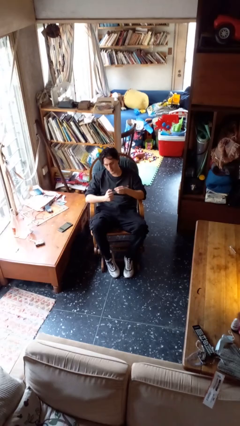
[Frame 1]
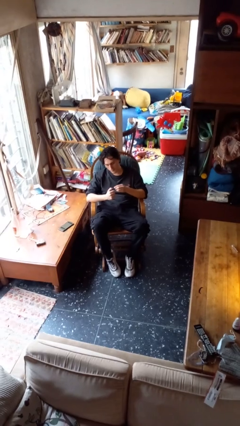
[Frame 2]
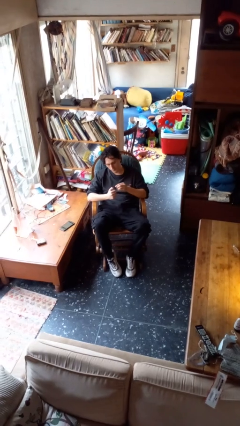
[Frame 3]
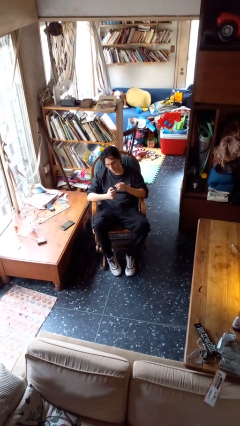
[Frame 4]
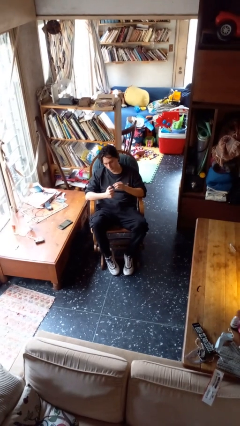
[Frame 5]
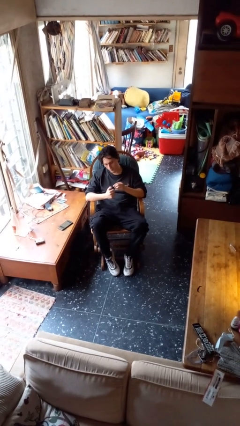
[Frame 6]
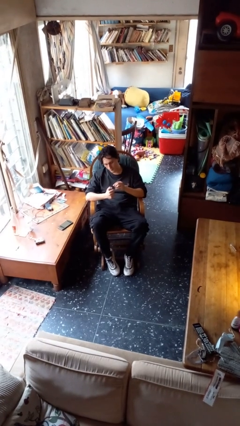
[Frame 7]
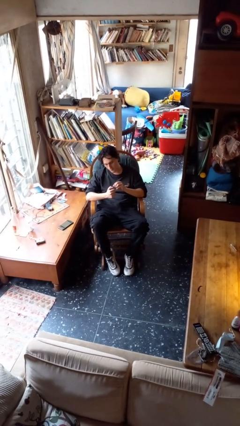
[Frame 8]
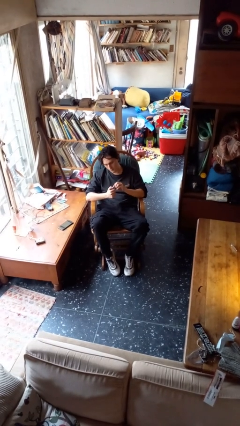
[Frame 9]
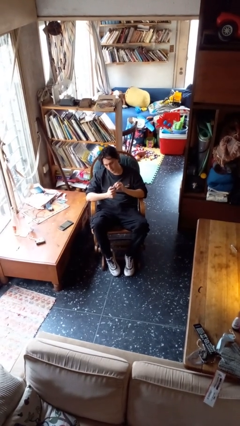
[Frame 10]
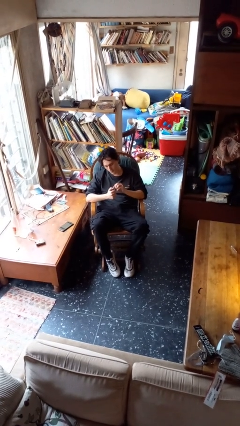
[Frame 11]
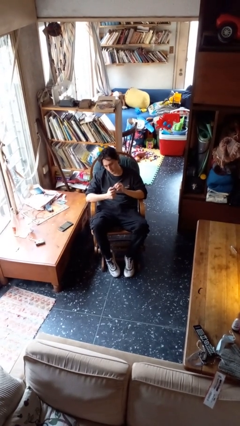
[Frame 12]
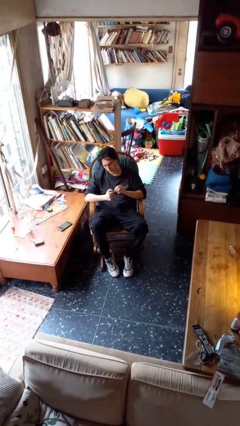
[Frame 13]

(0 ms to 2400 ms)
person files fingernails

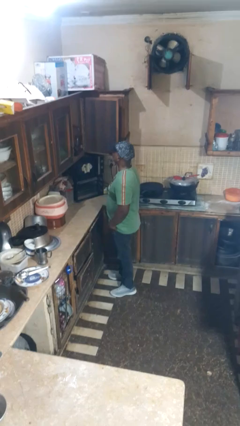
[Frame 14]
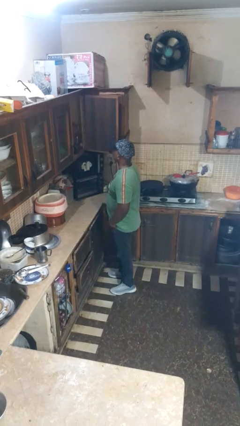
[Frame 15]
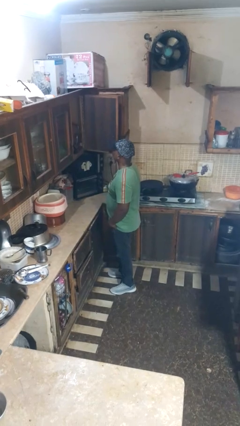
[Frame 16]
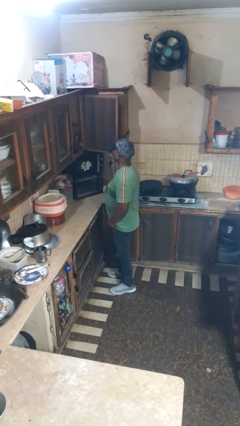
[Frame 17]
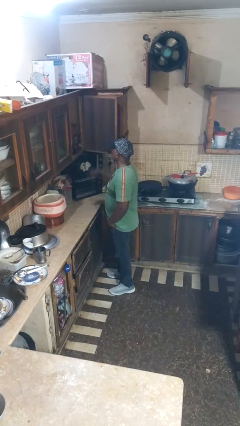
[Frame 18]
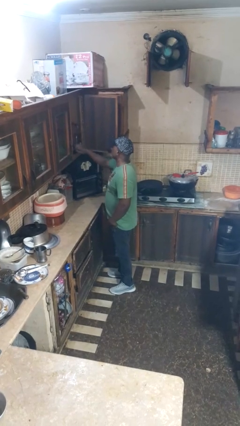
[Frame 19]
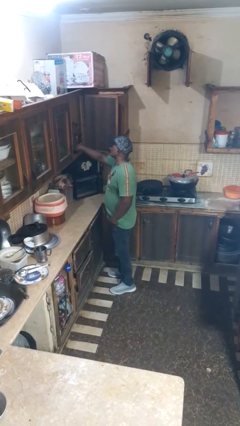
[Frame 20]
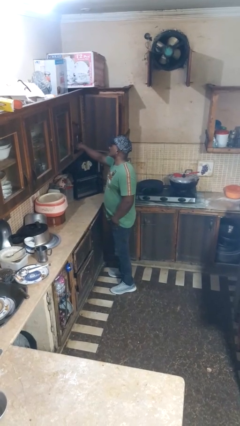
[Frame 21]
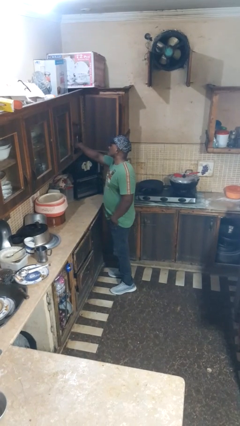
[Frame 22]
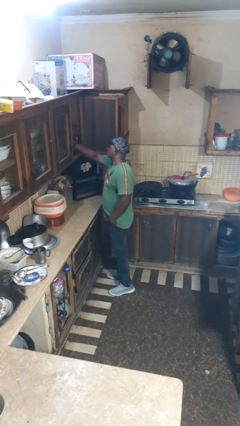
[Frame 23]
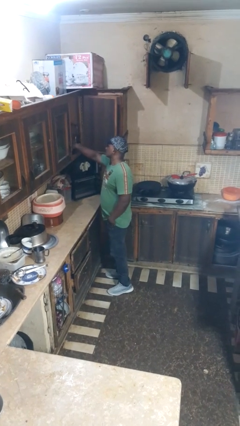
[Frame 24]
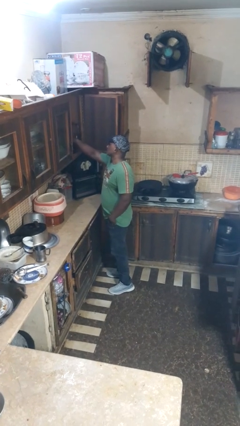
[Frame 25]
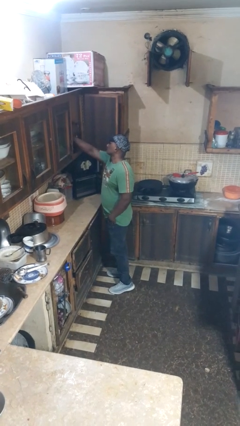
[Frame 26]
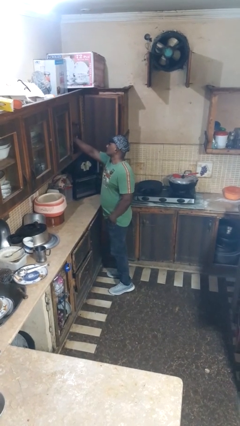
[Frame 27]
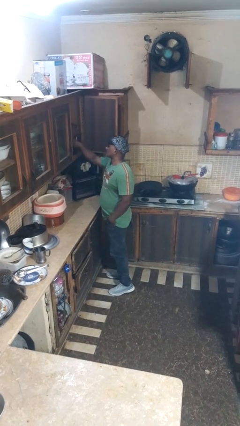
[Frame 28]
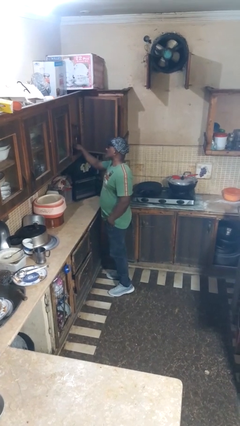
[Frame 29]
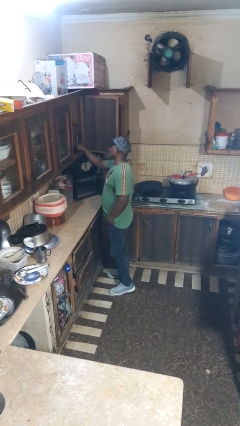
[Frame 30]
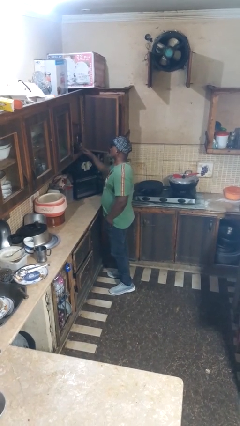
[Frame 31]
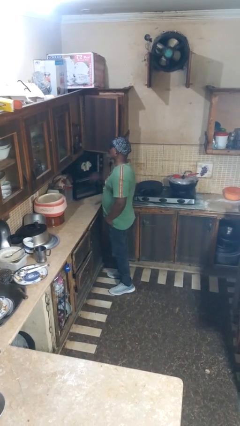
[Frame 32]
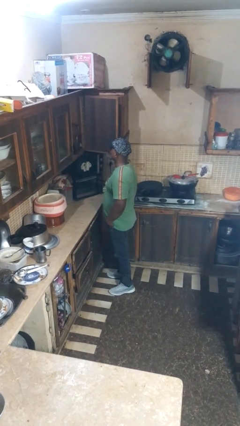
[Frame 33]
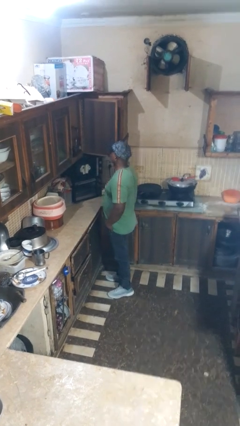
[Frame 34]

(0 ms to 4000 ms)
person searches in cabinet

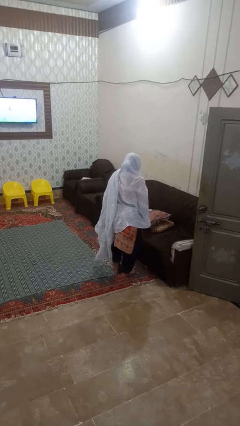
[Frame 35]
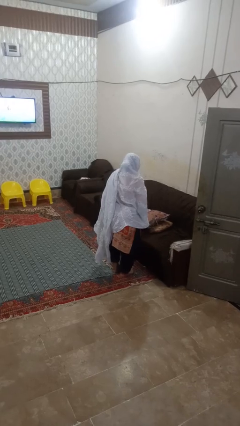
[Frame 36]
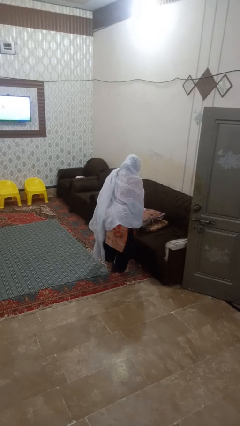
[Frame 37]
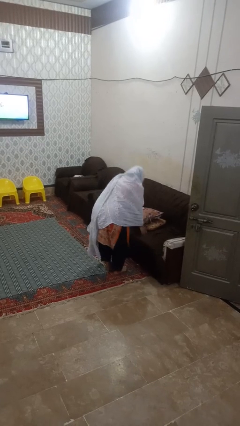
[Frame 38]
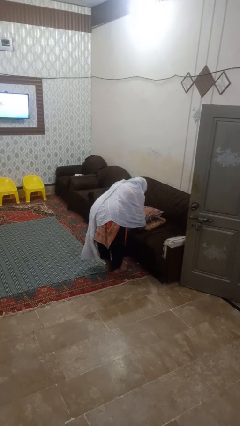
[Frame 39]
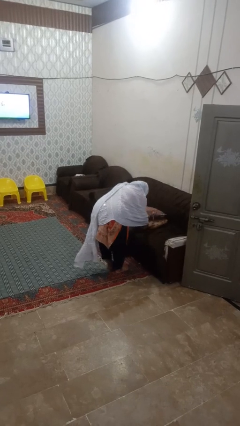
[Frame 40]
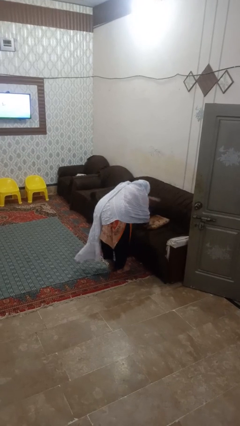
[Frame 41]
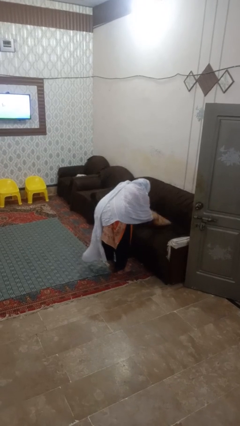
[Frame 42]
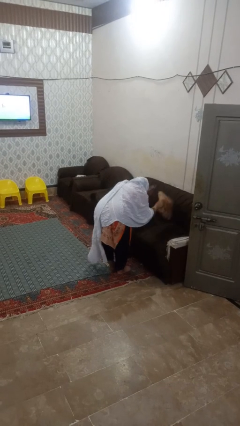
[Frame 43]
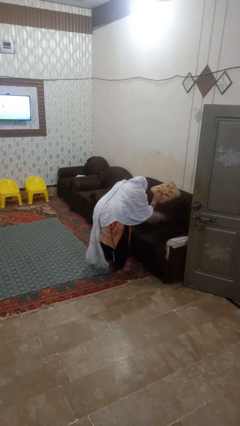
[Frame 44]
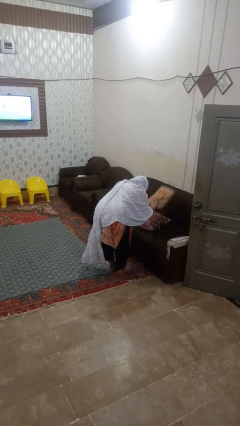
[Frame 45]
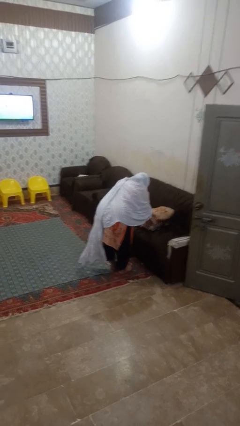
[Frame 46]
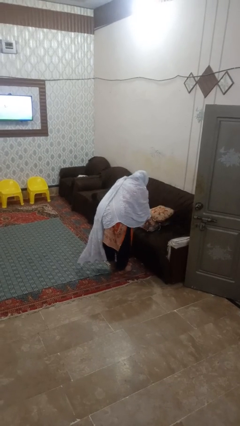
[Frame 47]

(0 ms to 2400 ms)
person searches in couch

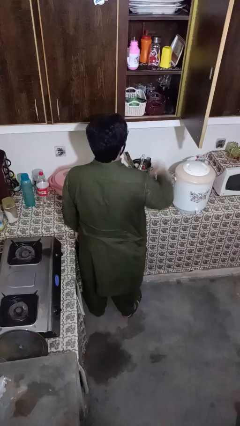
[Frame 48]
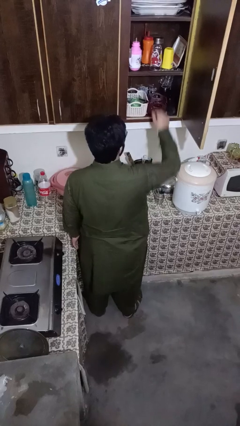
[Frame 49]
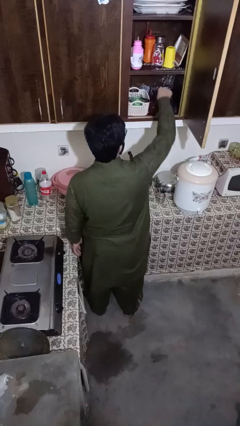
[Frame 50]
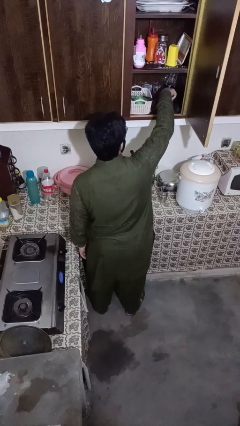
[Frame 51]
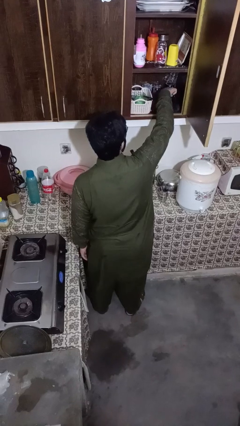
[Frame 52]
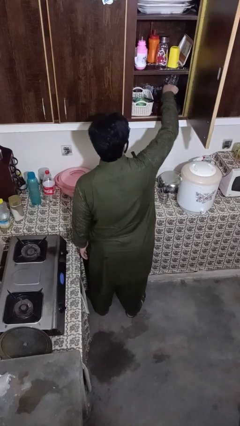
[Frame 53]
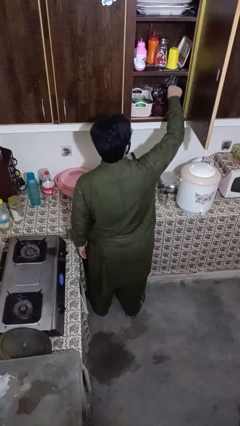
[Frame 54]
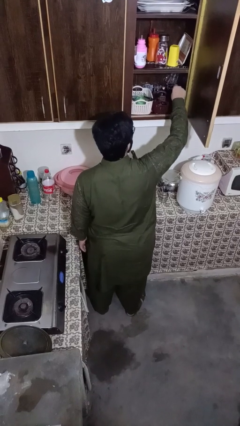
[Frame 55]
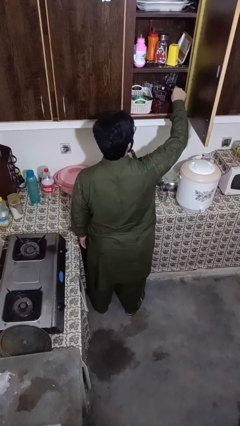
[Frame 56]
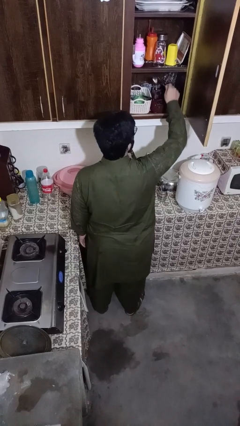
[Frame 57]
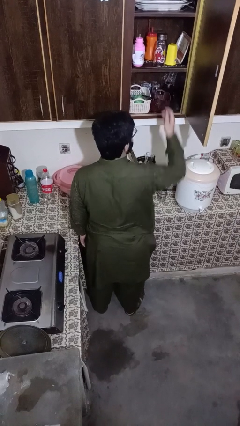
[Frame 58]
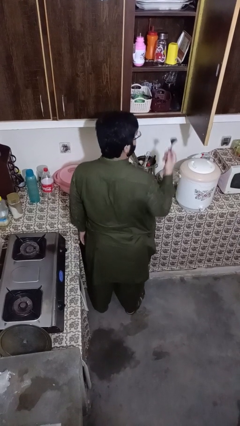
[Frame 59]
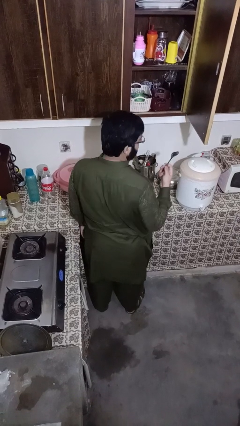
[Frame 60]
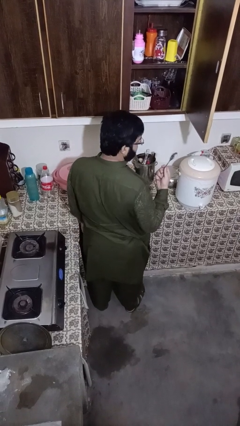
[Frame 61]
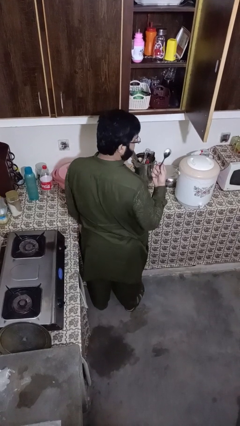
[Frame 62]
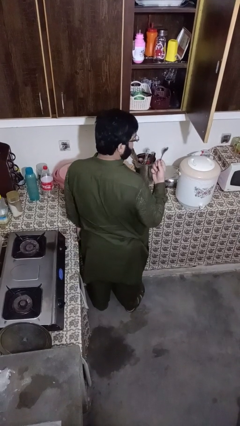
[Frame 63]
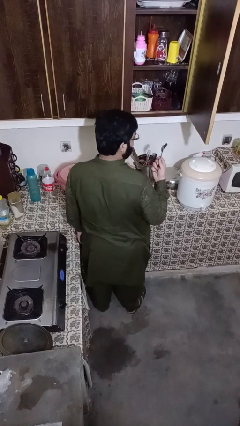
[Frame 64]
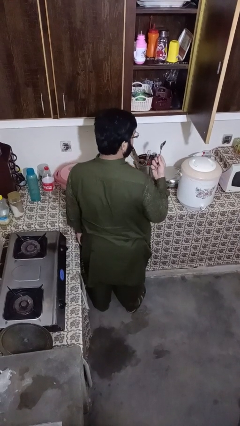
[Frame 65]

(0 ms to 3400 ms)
person takes object from kitchen drawer

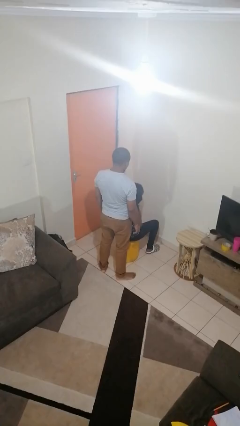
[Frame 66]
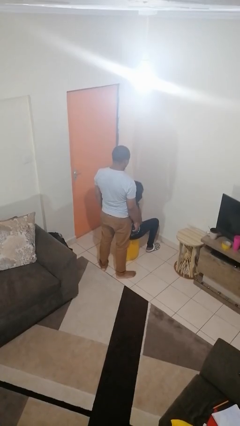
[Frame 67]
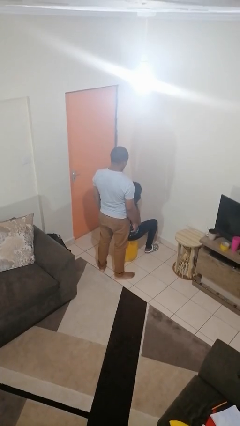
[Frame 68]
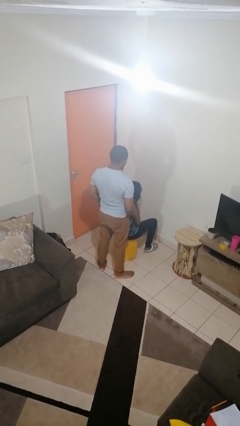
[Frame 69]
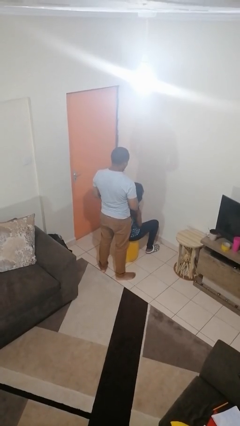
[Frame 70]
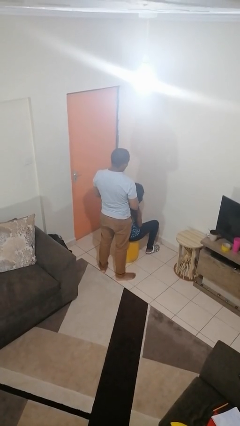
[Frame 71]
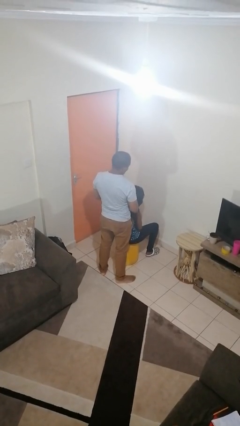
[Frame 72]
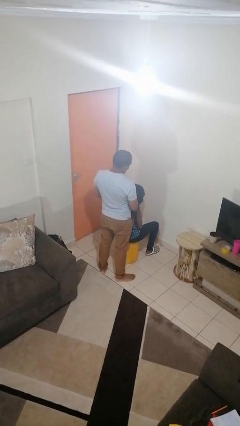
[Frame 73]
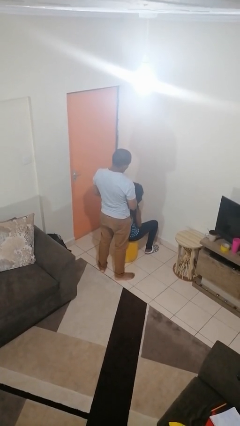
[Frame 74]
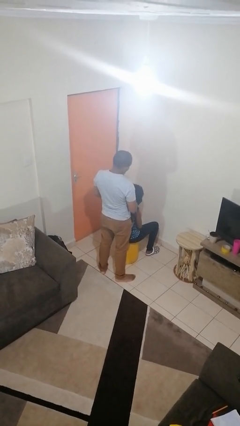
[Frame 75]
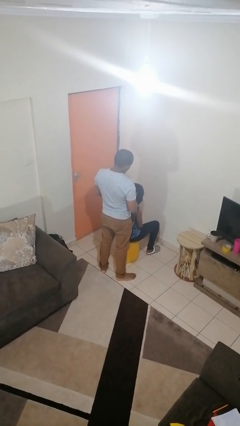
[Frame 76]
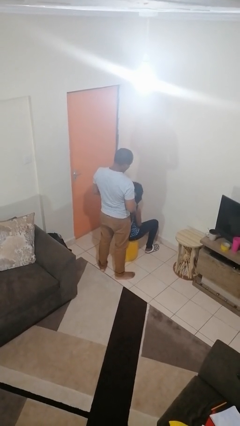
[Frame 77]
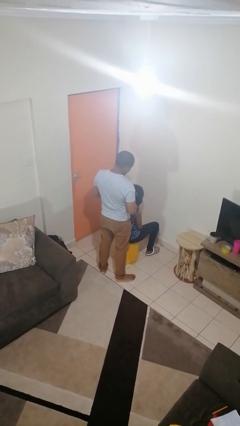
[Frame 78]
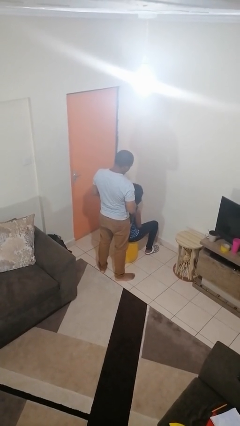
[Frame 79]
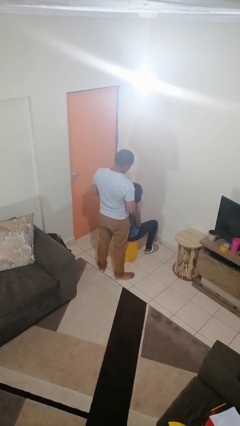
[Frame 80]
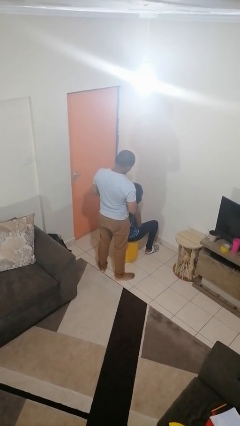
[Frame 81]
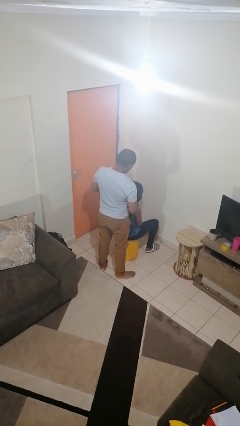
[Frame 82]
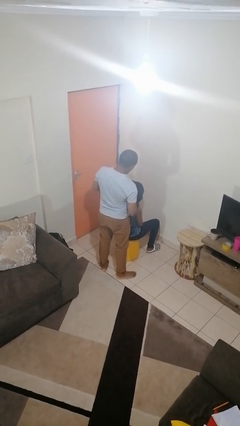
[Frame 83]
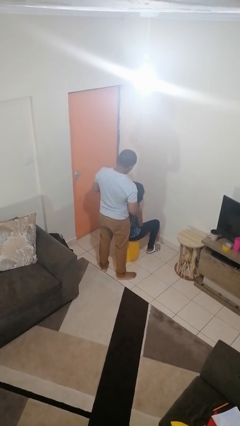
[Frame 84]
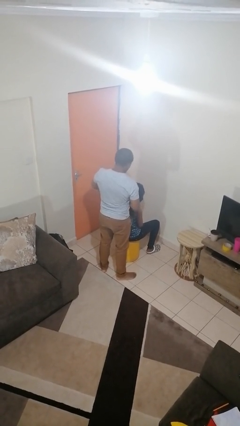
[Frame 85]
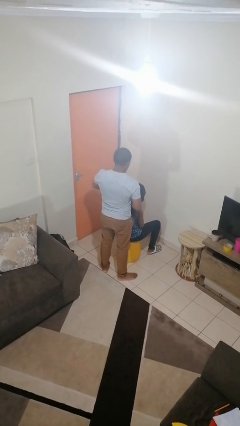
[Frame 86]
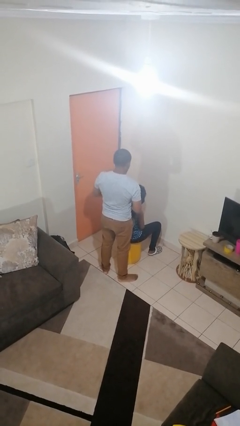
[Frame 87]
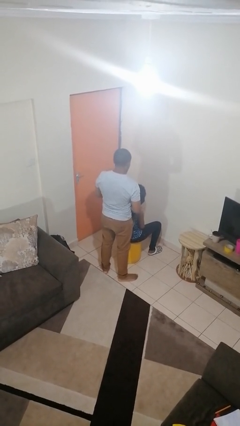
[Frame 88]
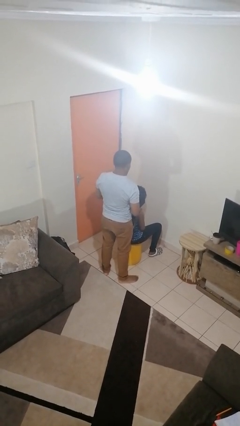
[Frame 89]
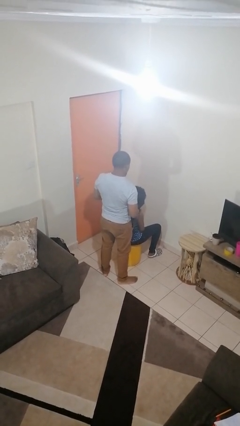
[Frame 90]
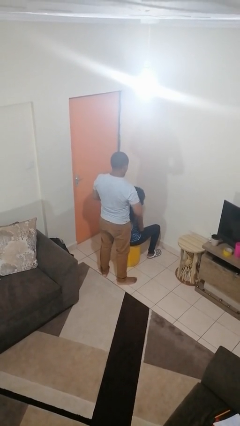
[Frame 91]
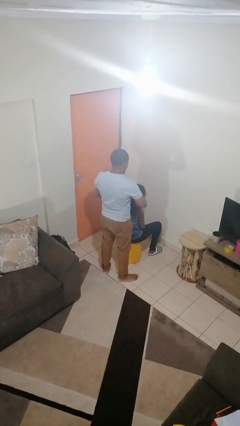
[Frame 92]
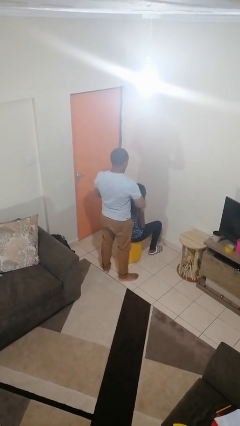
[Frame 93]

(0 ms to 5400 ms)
person braids hair of person
